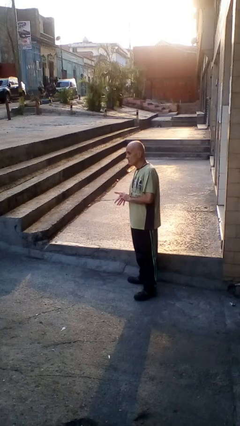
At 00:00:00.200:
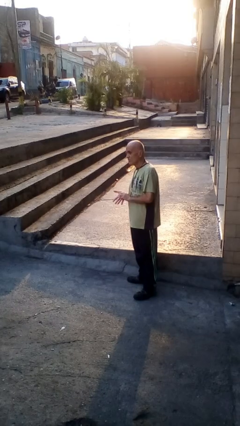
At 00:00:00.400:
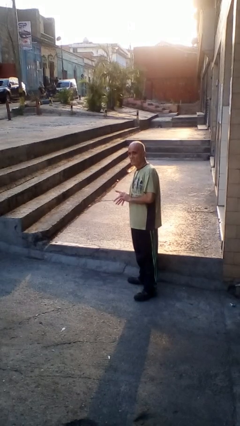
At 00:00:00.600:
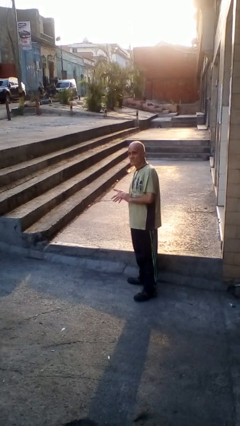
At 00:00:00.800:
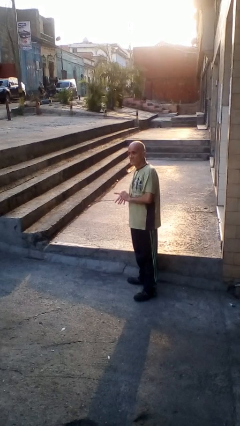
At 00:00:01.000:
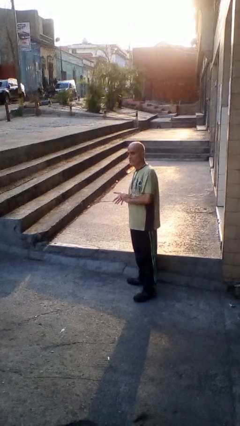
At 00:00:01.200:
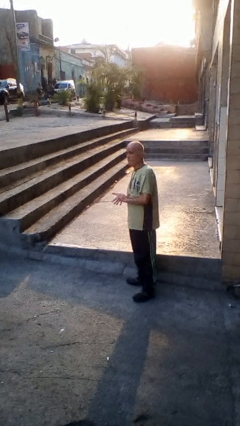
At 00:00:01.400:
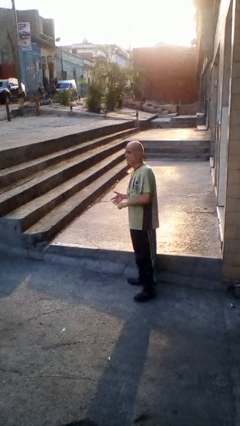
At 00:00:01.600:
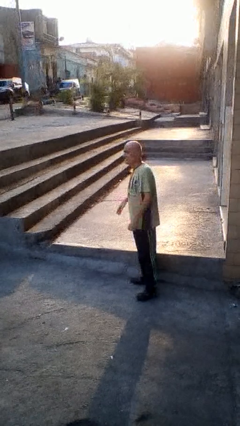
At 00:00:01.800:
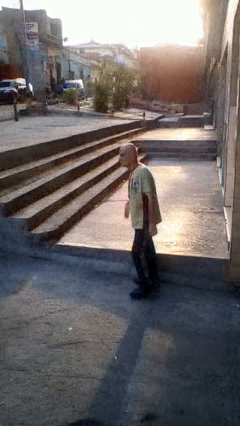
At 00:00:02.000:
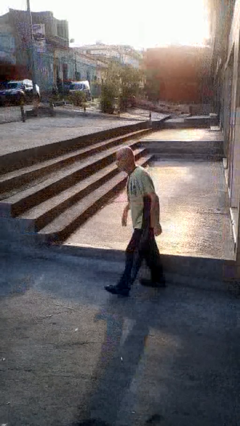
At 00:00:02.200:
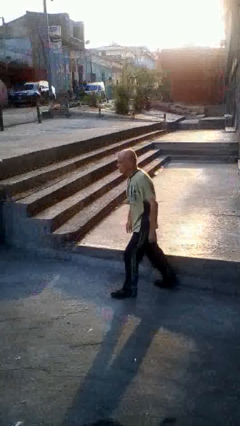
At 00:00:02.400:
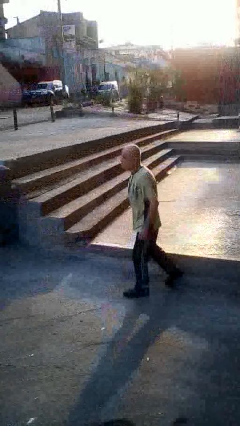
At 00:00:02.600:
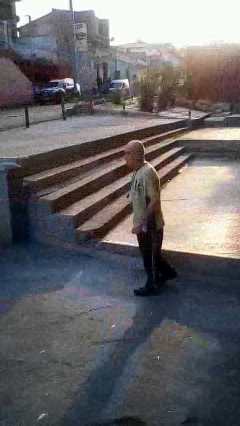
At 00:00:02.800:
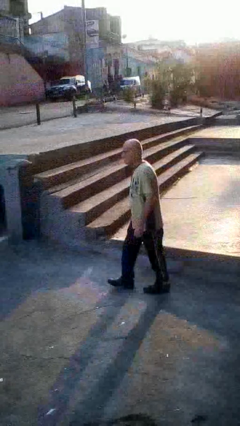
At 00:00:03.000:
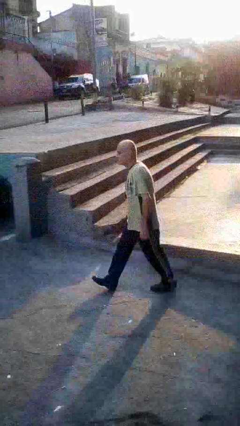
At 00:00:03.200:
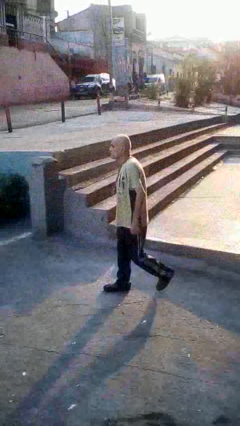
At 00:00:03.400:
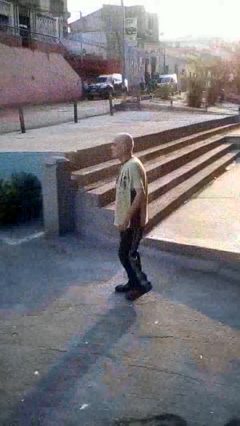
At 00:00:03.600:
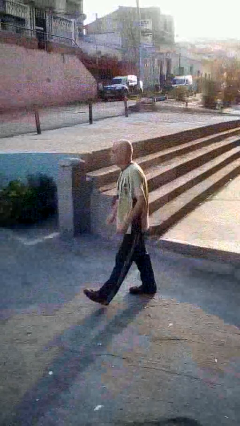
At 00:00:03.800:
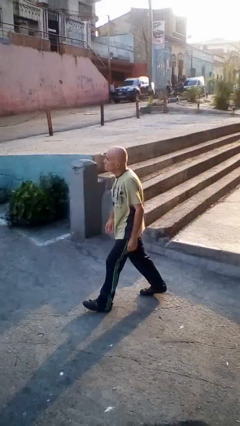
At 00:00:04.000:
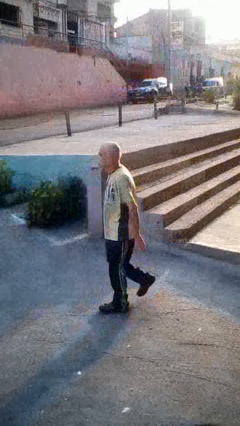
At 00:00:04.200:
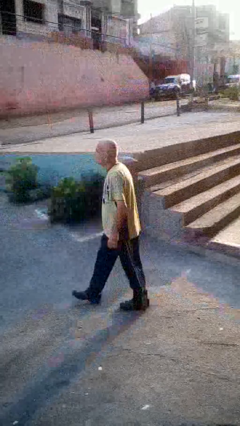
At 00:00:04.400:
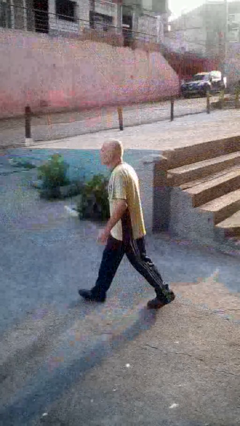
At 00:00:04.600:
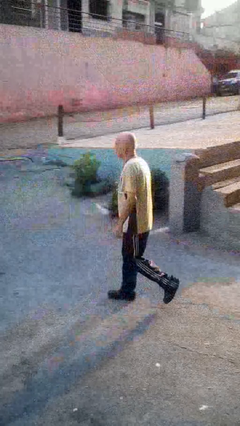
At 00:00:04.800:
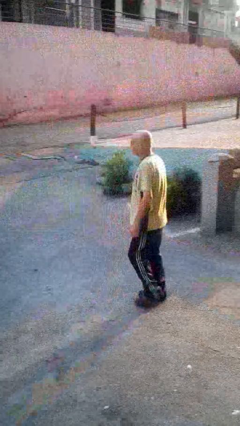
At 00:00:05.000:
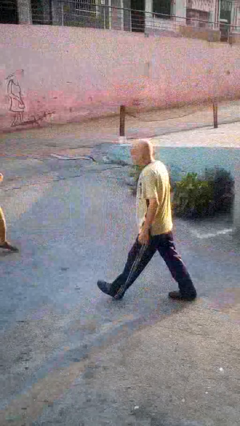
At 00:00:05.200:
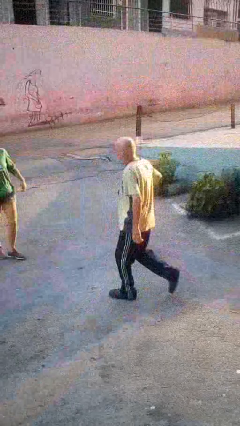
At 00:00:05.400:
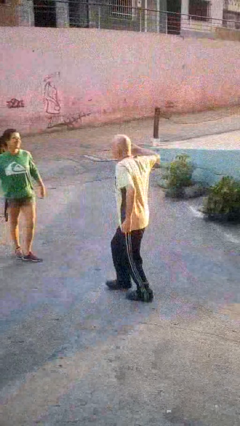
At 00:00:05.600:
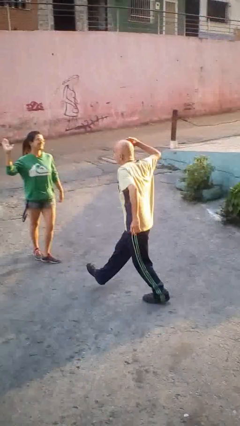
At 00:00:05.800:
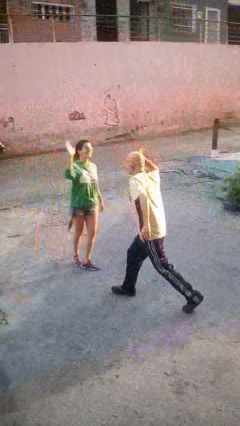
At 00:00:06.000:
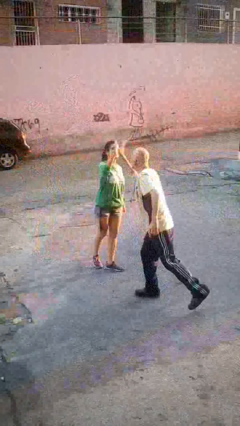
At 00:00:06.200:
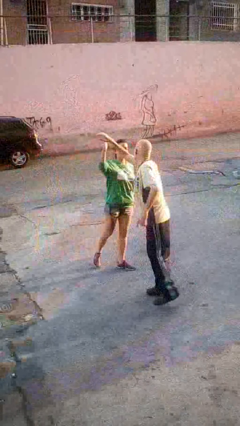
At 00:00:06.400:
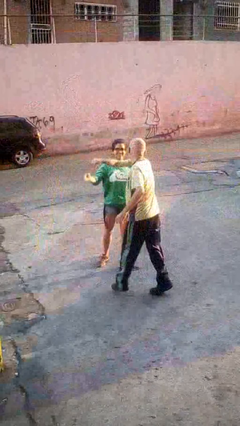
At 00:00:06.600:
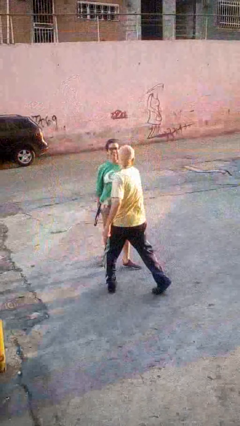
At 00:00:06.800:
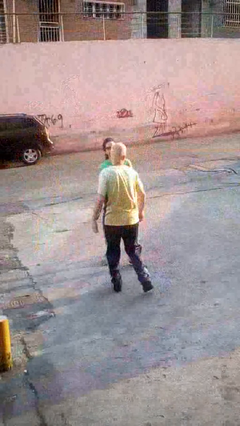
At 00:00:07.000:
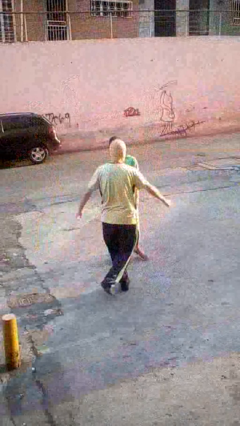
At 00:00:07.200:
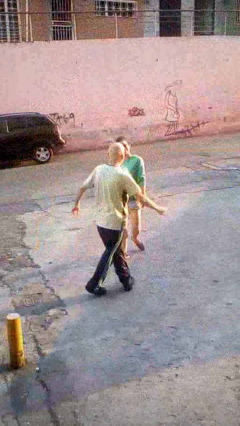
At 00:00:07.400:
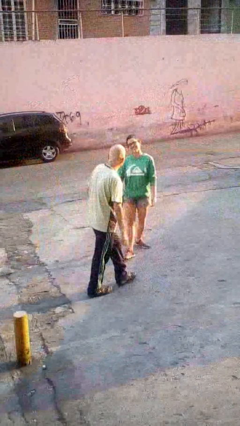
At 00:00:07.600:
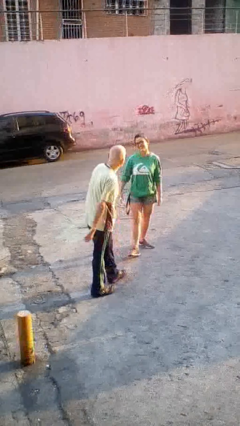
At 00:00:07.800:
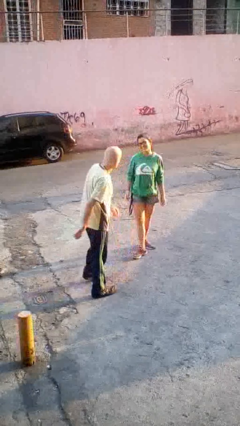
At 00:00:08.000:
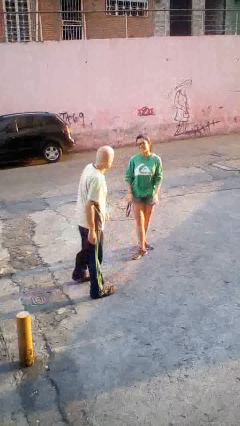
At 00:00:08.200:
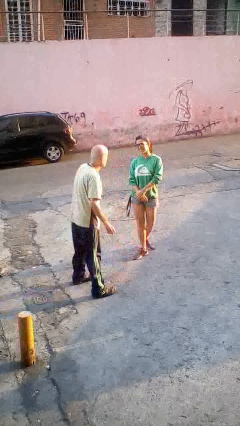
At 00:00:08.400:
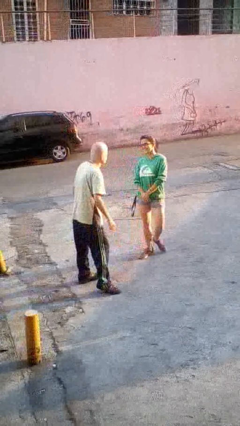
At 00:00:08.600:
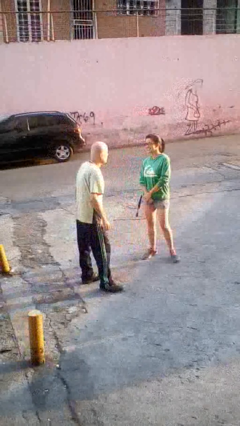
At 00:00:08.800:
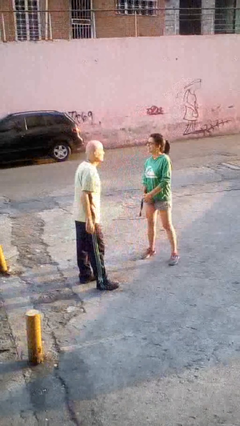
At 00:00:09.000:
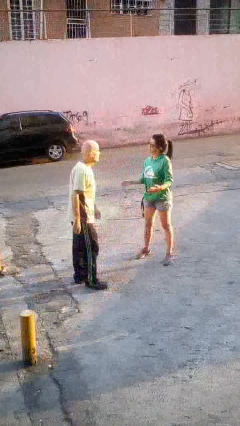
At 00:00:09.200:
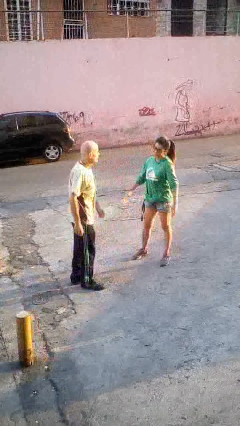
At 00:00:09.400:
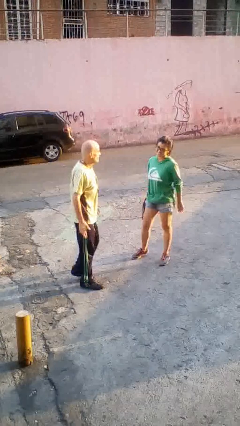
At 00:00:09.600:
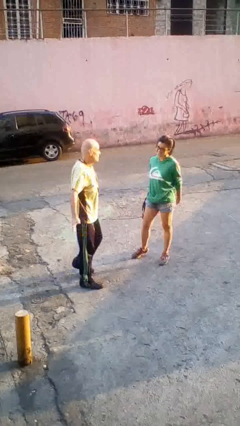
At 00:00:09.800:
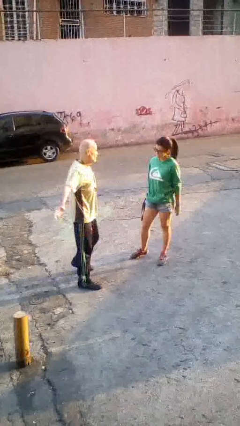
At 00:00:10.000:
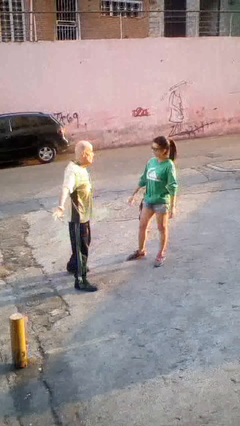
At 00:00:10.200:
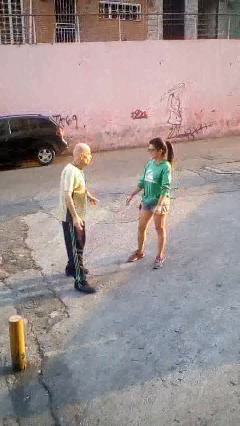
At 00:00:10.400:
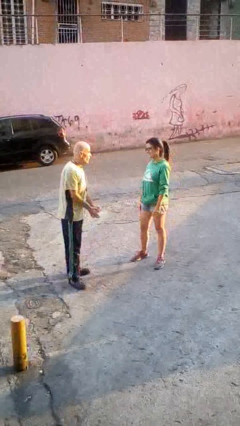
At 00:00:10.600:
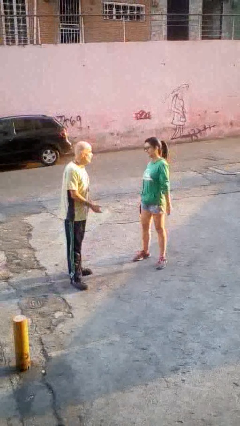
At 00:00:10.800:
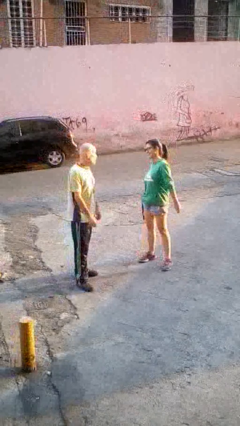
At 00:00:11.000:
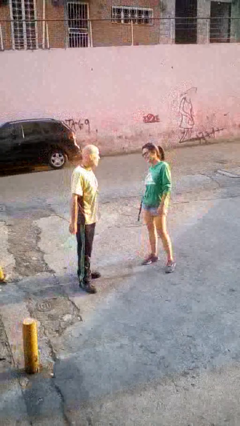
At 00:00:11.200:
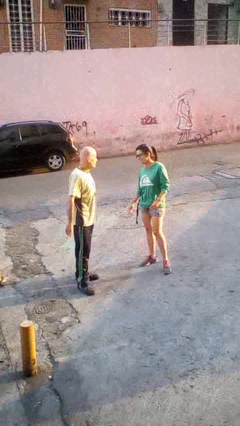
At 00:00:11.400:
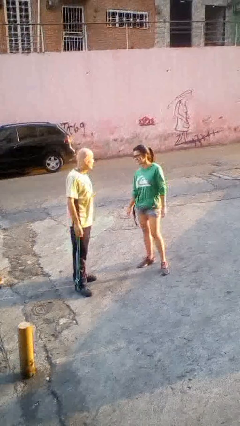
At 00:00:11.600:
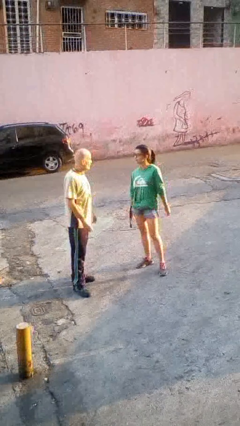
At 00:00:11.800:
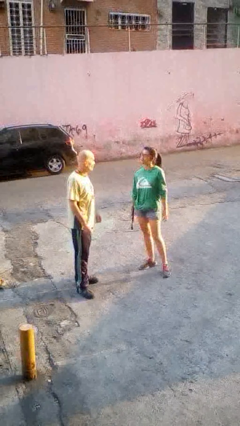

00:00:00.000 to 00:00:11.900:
person highfives hand

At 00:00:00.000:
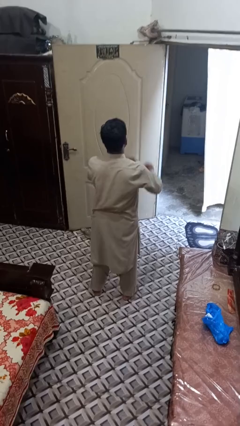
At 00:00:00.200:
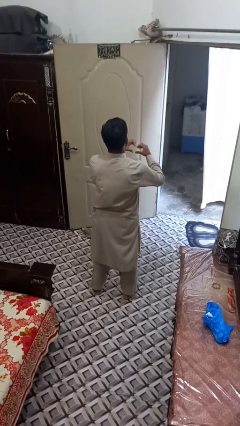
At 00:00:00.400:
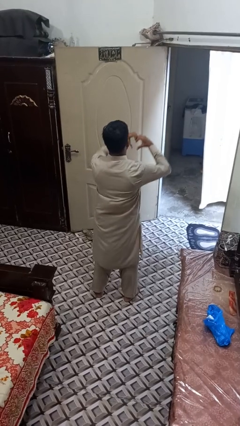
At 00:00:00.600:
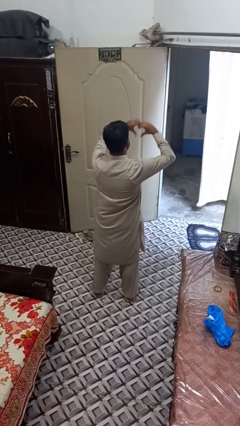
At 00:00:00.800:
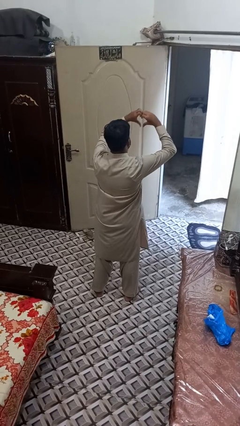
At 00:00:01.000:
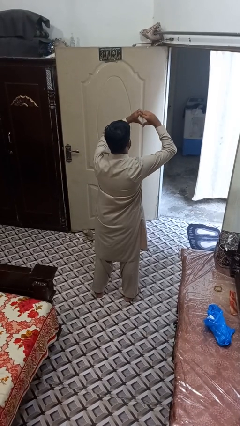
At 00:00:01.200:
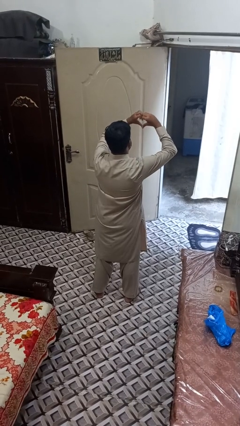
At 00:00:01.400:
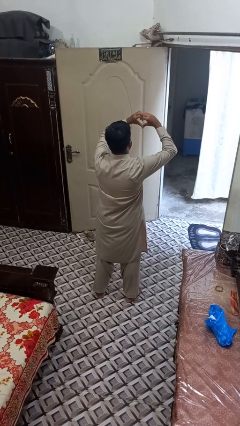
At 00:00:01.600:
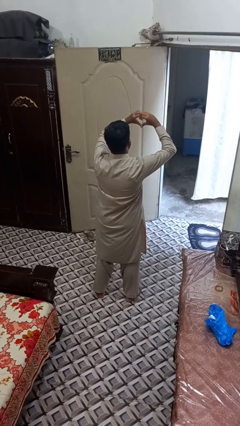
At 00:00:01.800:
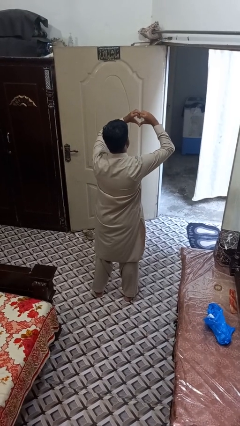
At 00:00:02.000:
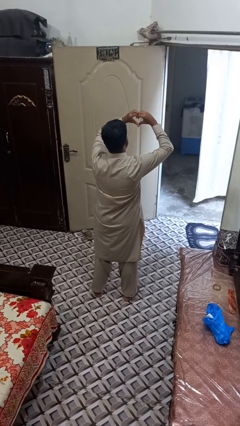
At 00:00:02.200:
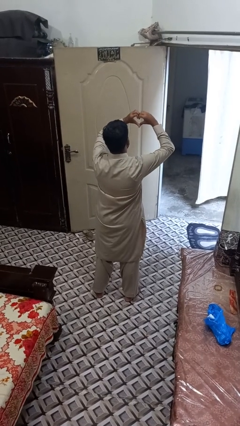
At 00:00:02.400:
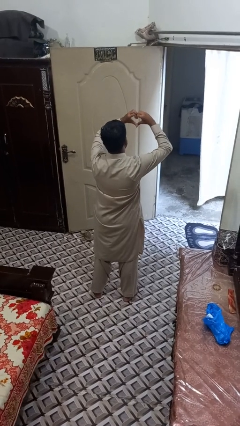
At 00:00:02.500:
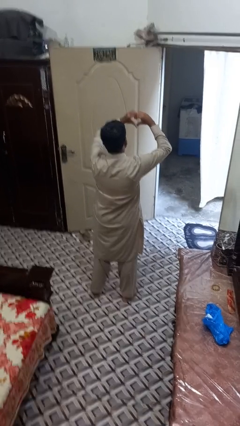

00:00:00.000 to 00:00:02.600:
person gestures heart

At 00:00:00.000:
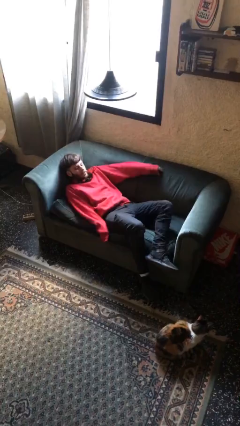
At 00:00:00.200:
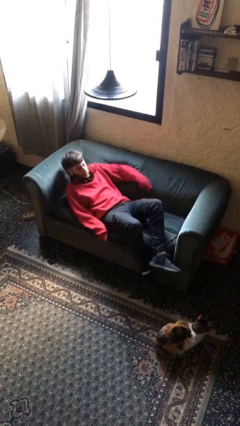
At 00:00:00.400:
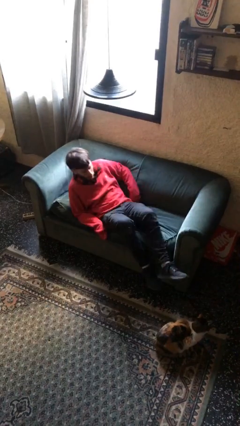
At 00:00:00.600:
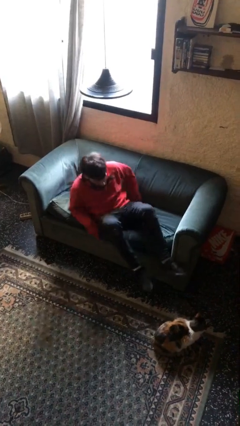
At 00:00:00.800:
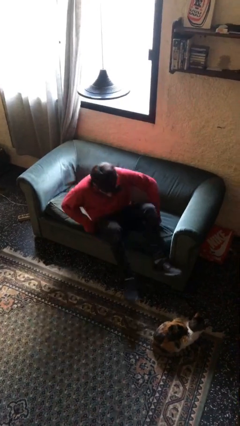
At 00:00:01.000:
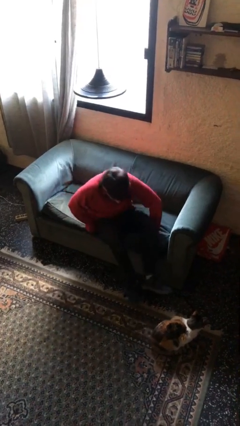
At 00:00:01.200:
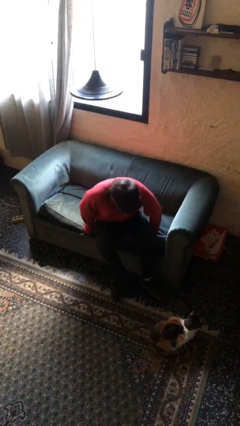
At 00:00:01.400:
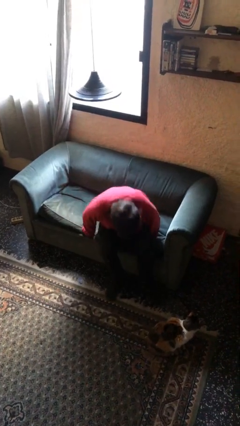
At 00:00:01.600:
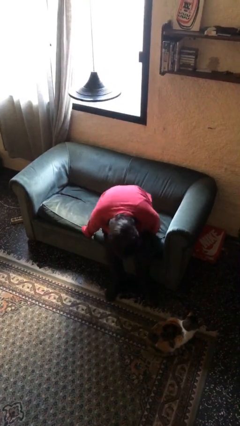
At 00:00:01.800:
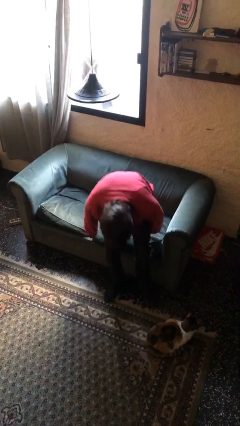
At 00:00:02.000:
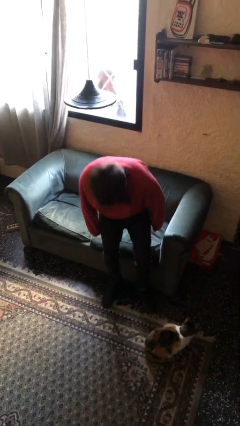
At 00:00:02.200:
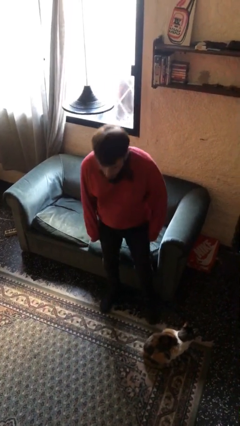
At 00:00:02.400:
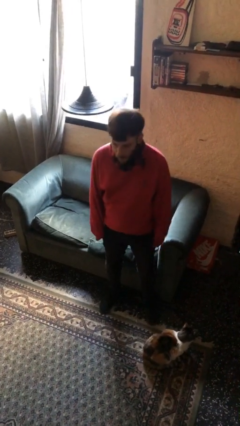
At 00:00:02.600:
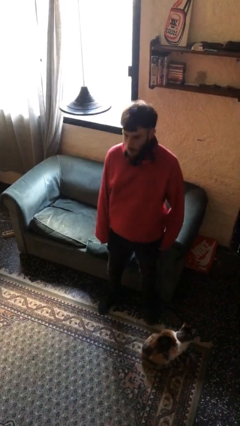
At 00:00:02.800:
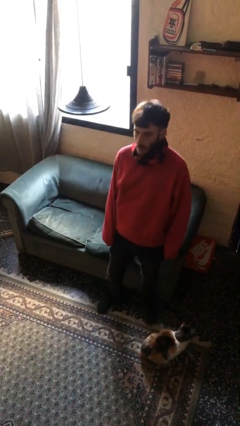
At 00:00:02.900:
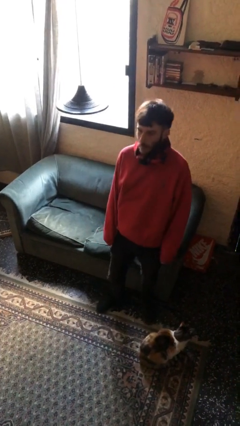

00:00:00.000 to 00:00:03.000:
person stands up

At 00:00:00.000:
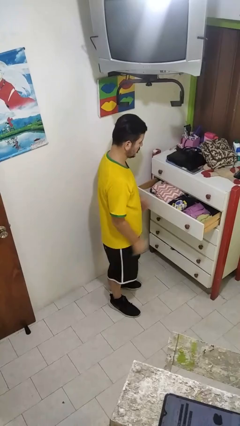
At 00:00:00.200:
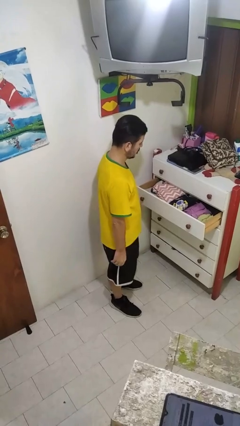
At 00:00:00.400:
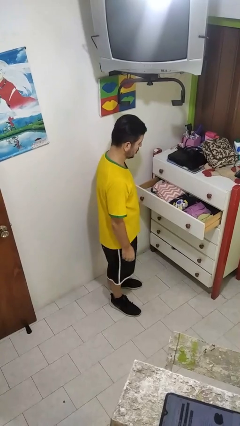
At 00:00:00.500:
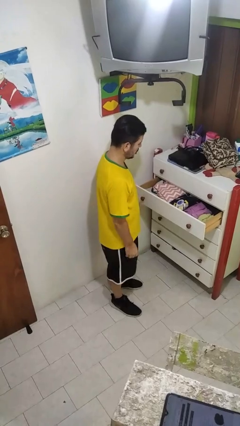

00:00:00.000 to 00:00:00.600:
person puts clothes into dresser
